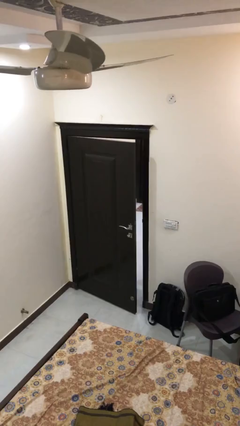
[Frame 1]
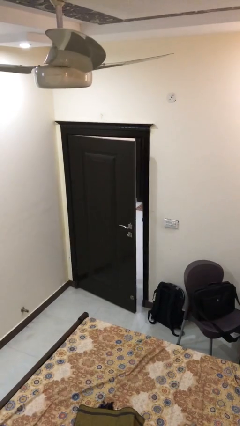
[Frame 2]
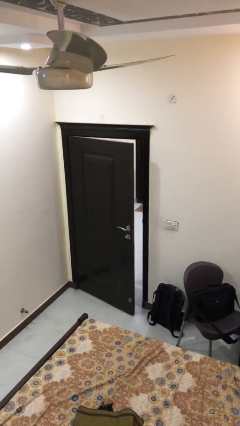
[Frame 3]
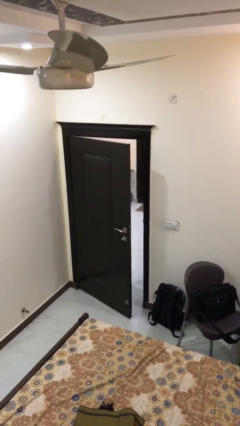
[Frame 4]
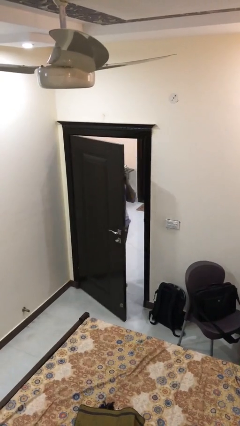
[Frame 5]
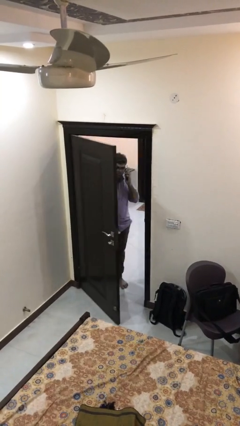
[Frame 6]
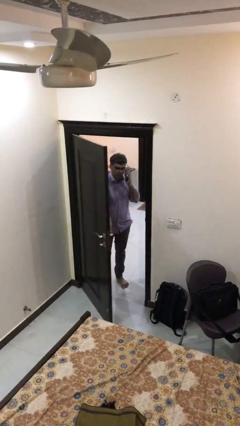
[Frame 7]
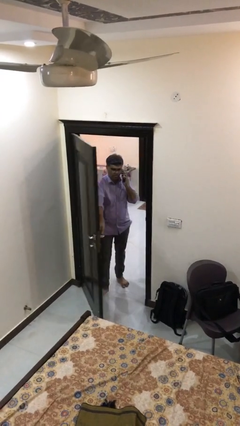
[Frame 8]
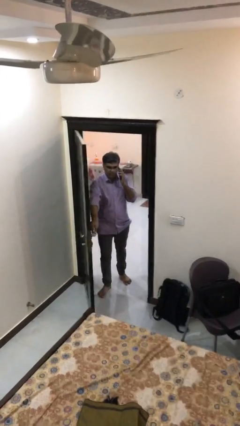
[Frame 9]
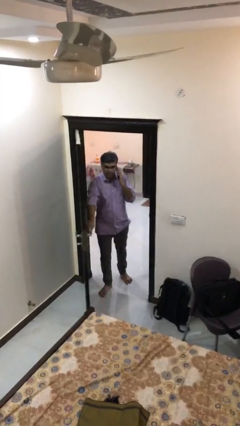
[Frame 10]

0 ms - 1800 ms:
person opens facility door

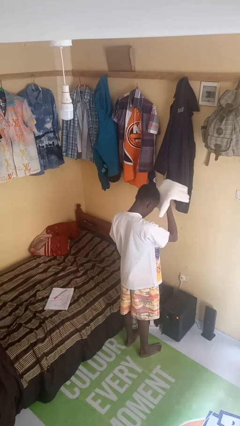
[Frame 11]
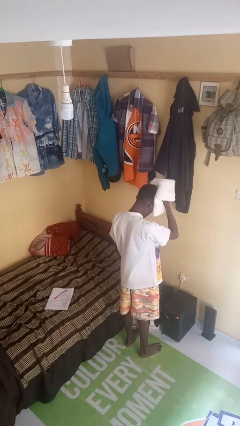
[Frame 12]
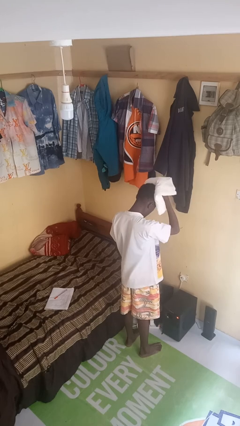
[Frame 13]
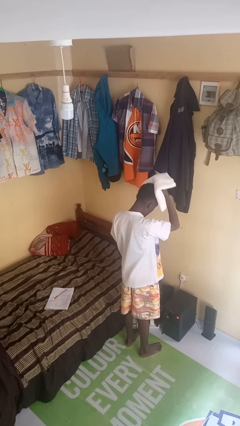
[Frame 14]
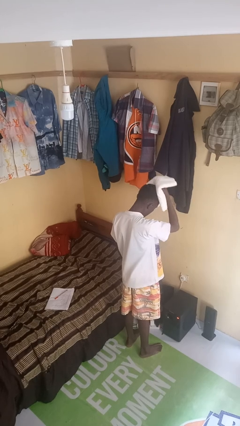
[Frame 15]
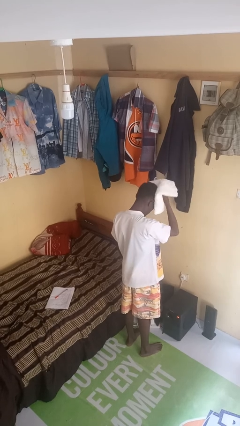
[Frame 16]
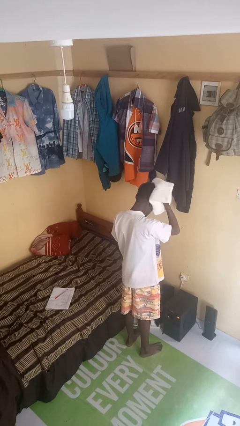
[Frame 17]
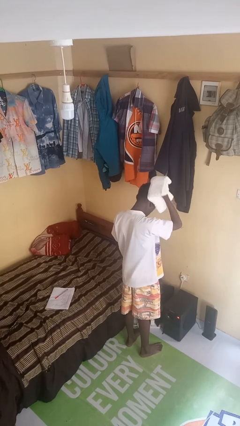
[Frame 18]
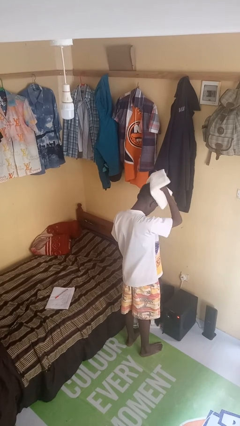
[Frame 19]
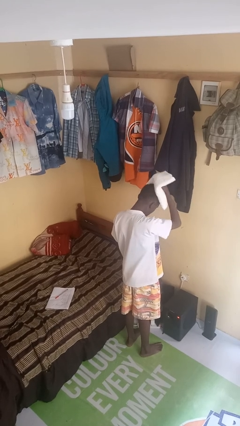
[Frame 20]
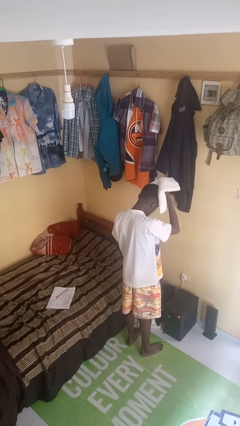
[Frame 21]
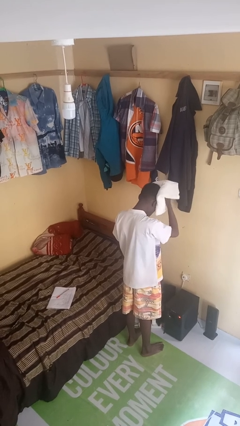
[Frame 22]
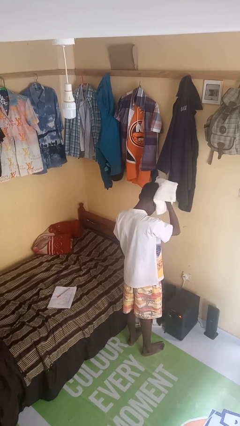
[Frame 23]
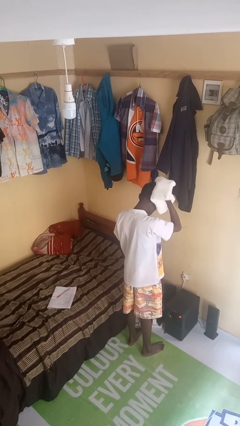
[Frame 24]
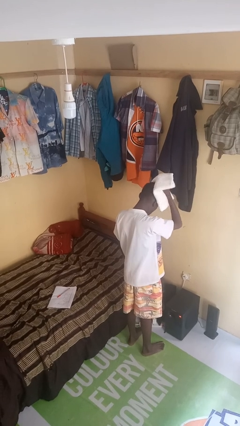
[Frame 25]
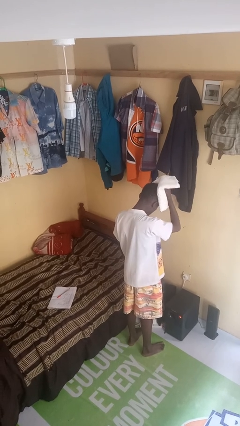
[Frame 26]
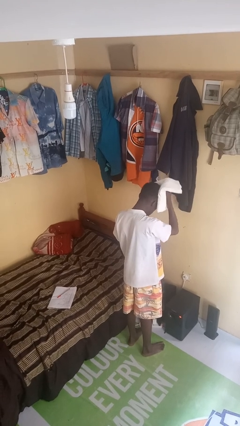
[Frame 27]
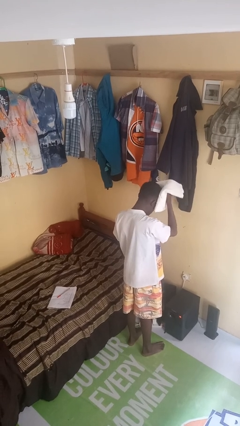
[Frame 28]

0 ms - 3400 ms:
person dries hair with towel

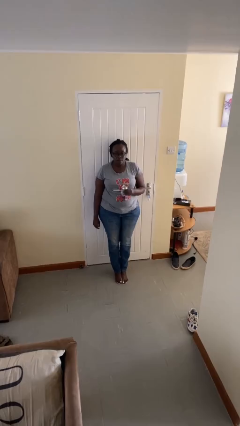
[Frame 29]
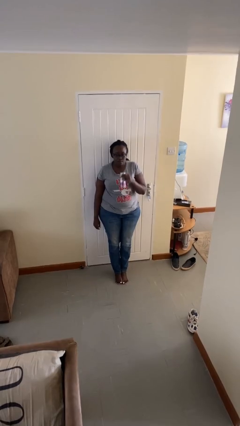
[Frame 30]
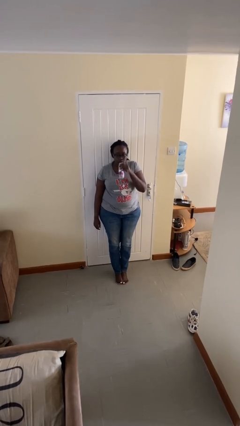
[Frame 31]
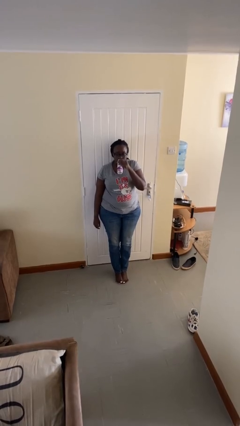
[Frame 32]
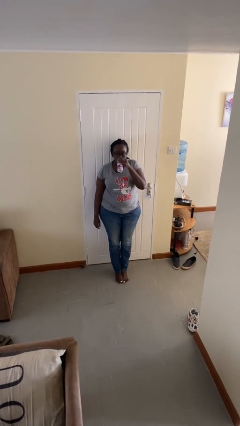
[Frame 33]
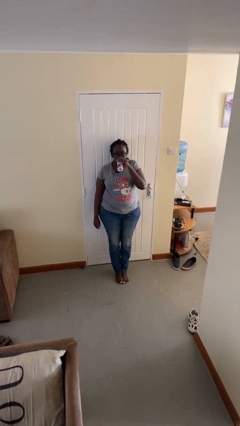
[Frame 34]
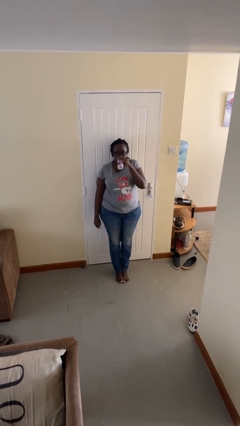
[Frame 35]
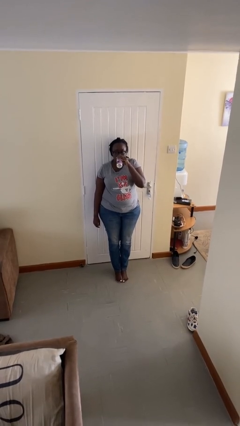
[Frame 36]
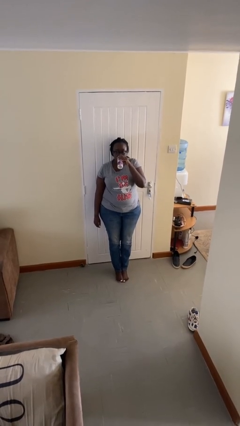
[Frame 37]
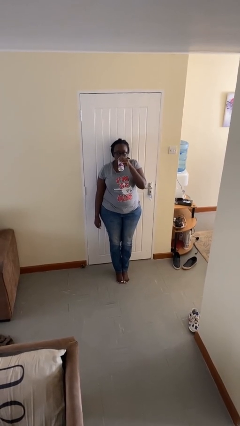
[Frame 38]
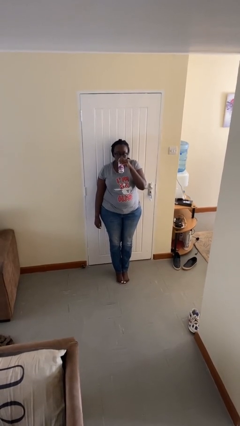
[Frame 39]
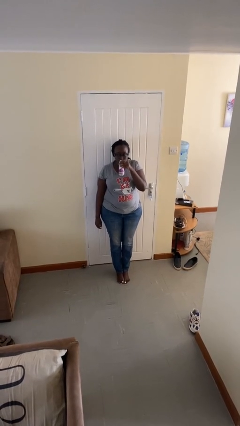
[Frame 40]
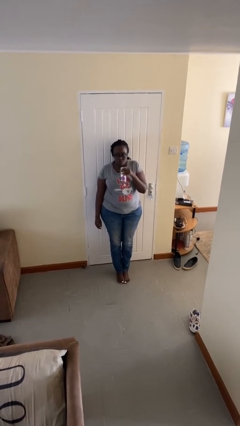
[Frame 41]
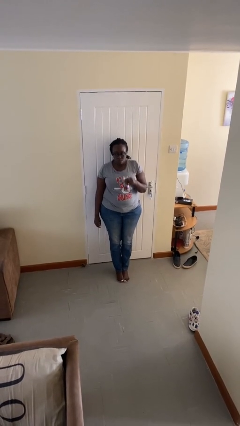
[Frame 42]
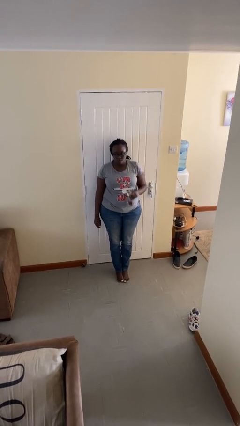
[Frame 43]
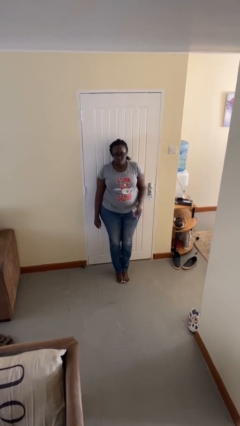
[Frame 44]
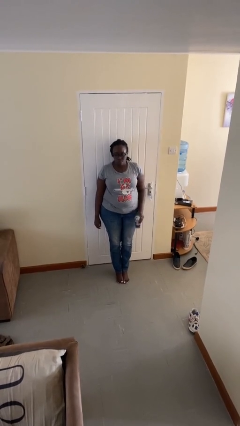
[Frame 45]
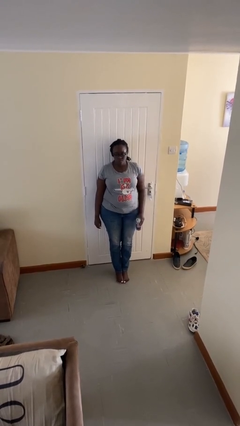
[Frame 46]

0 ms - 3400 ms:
person drinks from beverage can

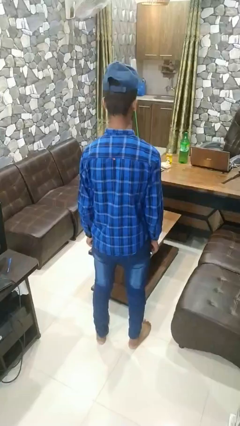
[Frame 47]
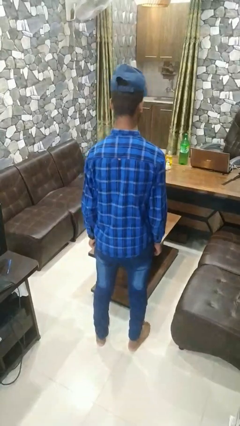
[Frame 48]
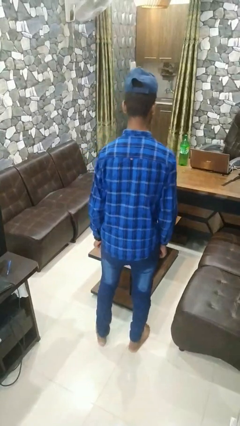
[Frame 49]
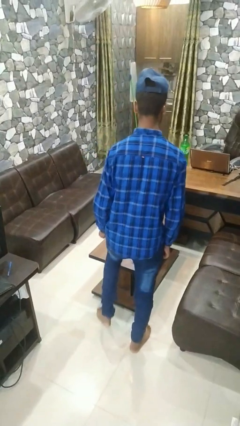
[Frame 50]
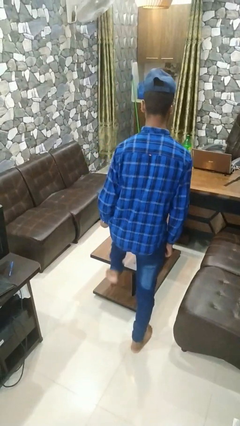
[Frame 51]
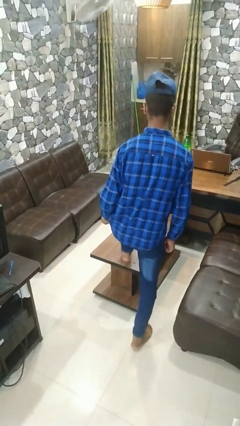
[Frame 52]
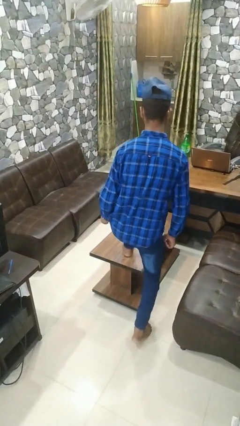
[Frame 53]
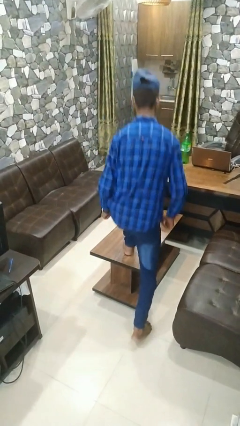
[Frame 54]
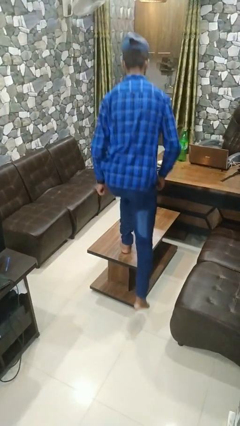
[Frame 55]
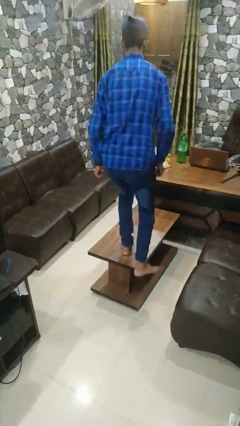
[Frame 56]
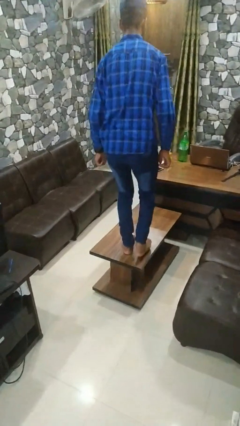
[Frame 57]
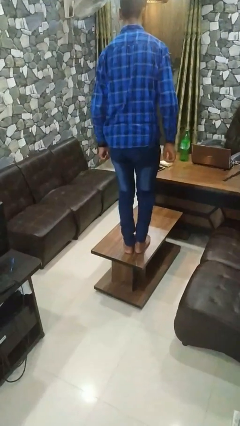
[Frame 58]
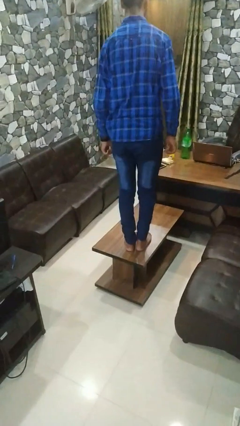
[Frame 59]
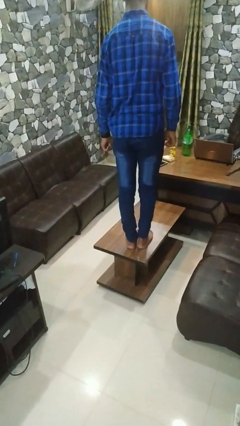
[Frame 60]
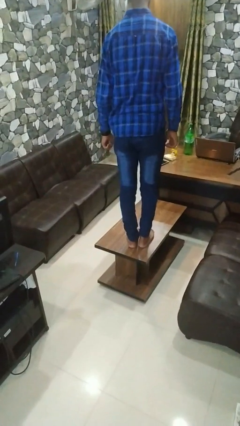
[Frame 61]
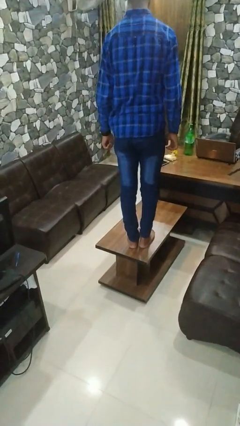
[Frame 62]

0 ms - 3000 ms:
person climbs on table

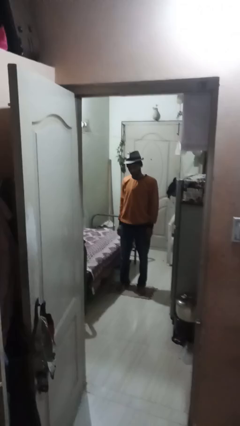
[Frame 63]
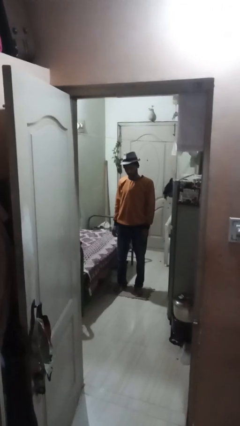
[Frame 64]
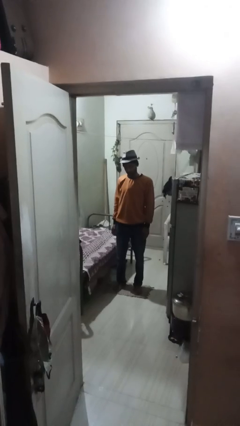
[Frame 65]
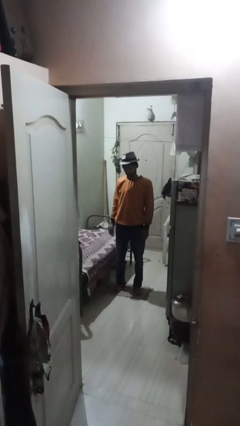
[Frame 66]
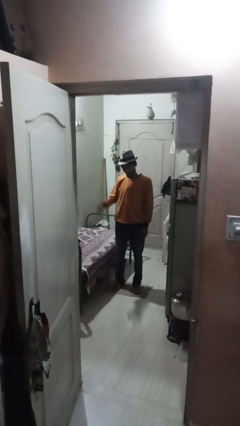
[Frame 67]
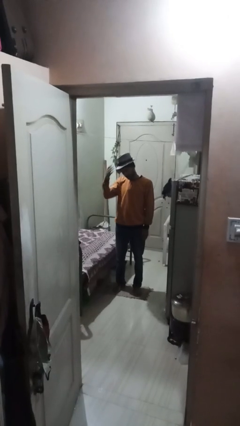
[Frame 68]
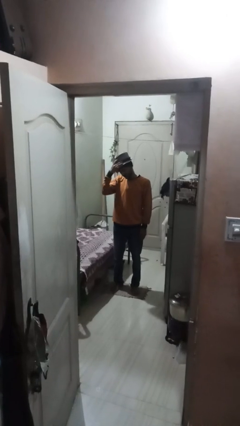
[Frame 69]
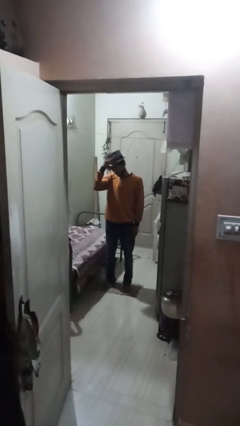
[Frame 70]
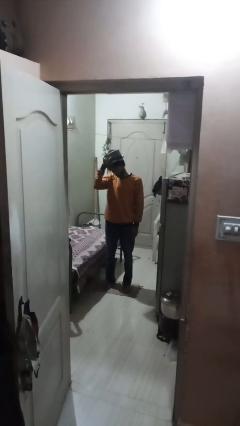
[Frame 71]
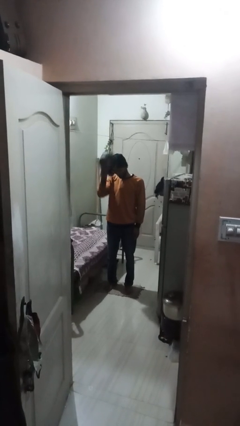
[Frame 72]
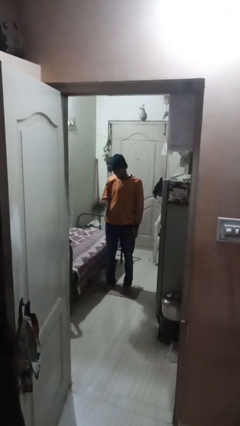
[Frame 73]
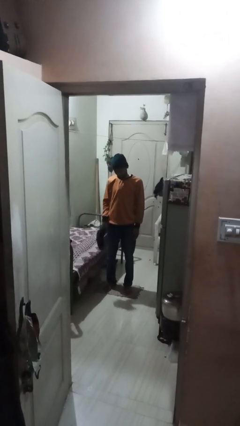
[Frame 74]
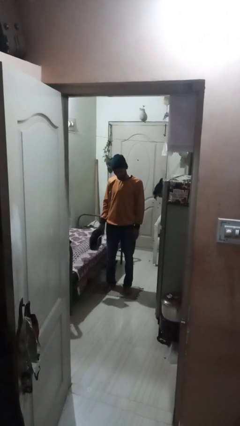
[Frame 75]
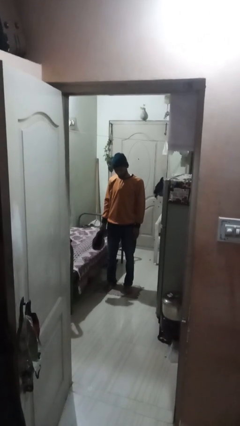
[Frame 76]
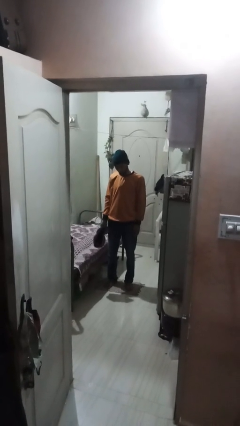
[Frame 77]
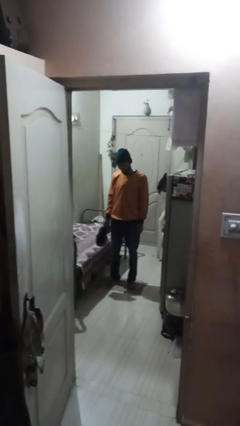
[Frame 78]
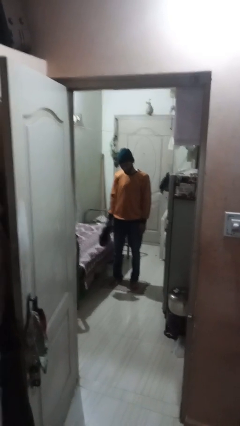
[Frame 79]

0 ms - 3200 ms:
person takes off hat

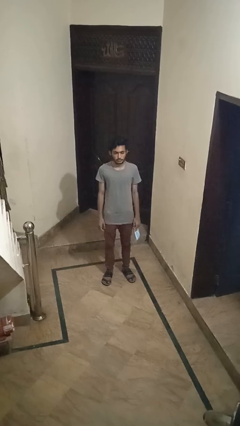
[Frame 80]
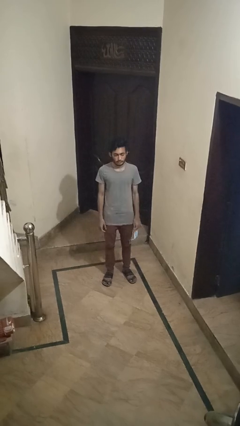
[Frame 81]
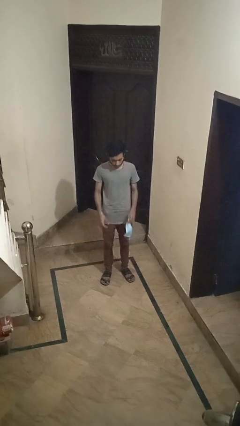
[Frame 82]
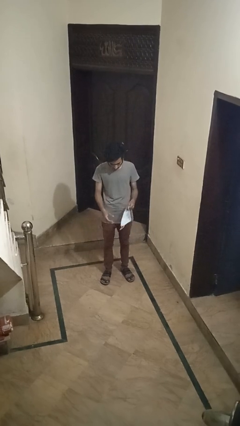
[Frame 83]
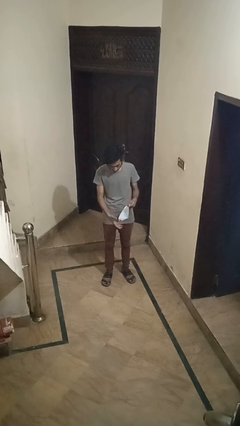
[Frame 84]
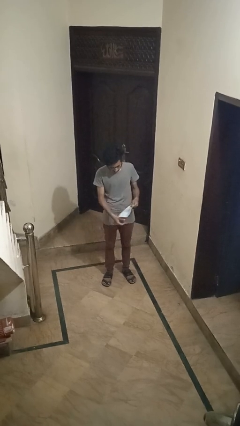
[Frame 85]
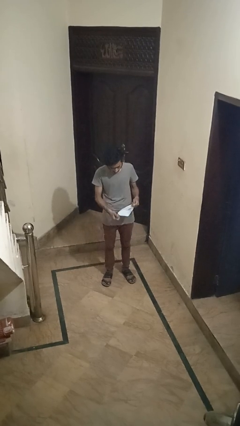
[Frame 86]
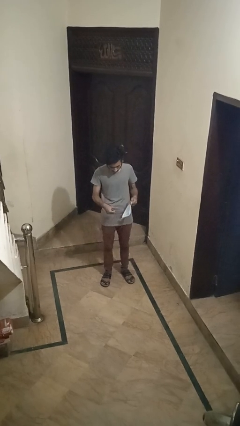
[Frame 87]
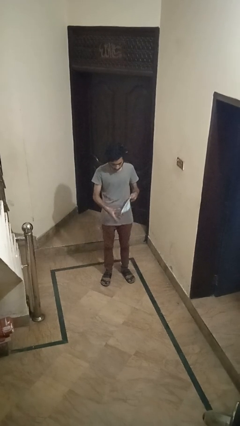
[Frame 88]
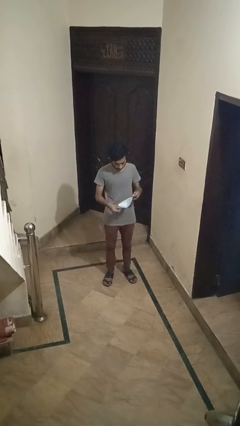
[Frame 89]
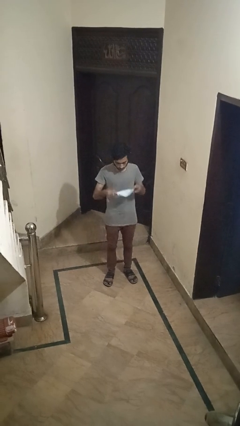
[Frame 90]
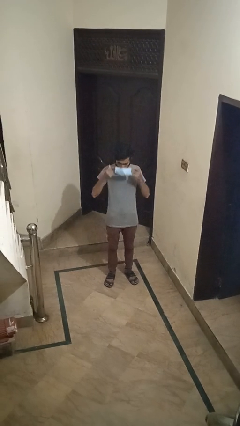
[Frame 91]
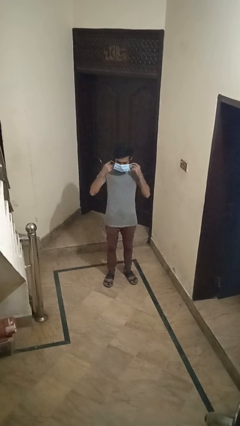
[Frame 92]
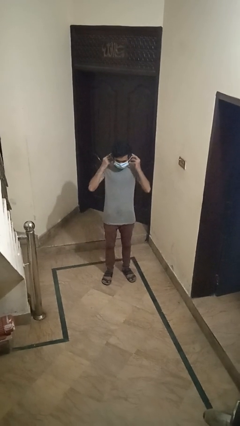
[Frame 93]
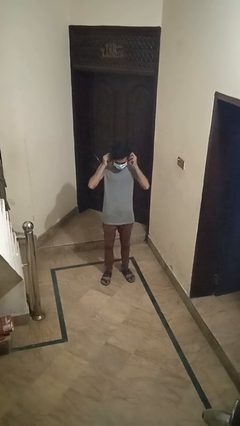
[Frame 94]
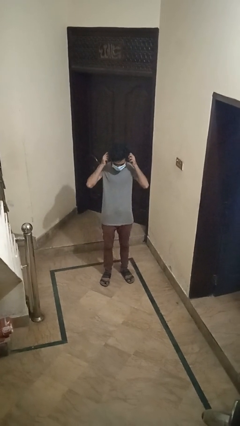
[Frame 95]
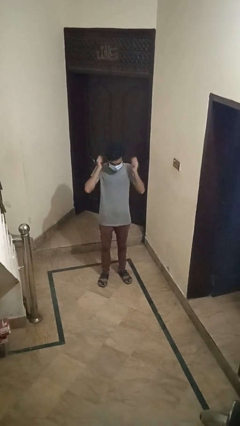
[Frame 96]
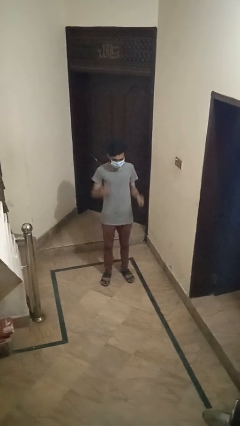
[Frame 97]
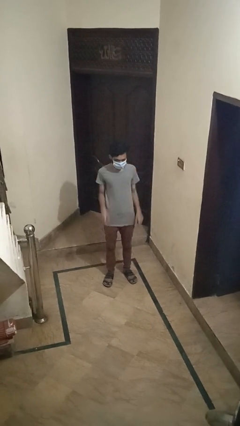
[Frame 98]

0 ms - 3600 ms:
person puts on facemask
